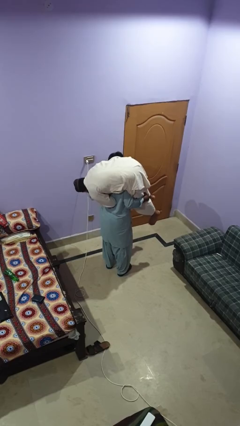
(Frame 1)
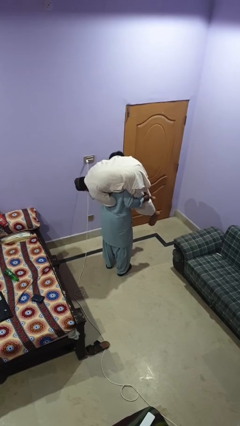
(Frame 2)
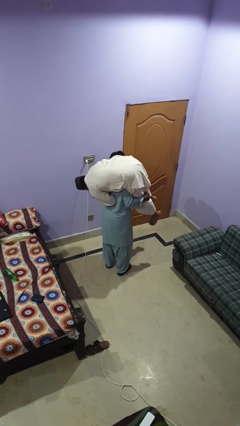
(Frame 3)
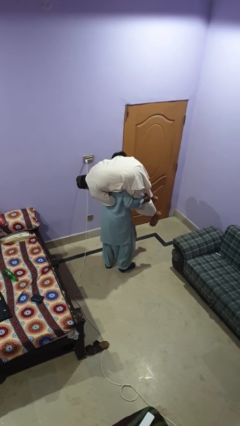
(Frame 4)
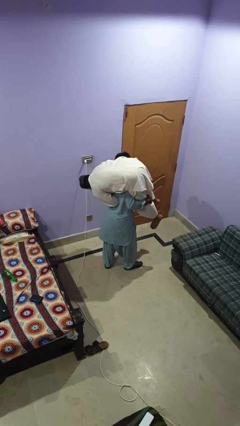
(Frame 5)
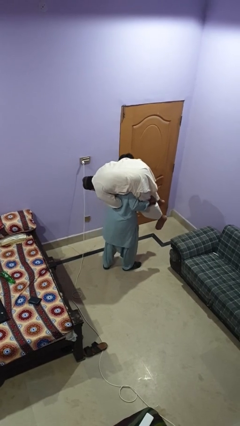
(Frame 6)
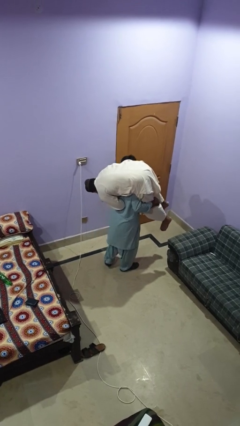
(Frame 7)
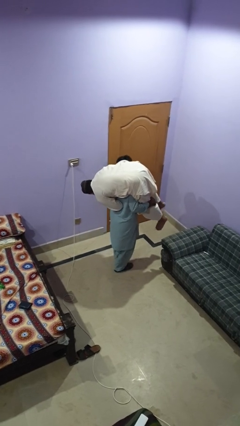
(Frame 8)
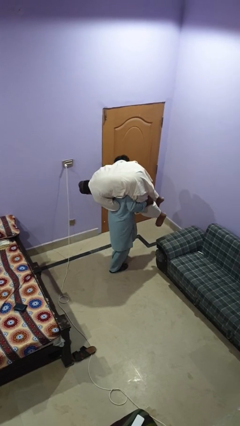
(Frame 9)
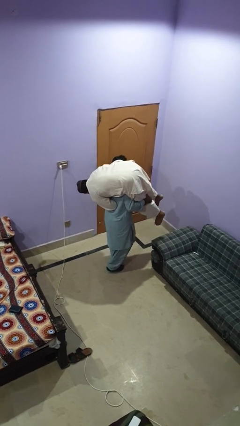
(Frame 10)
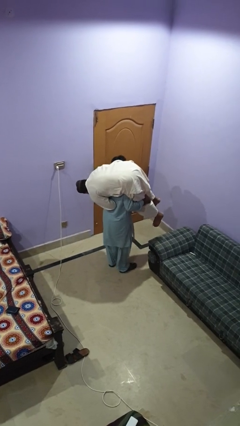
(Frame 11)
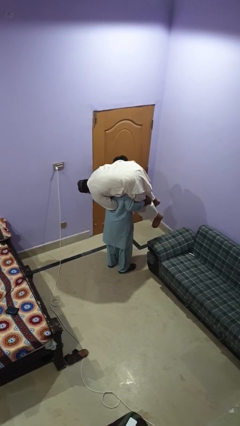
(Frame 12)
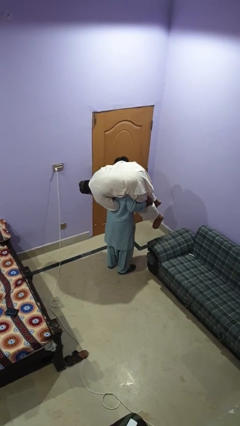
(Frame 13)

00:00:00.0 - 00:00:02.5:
person carries person on shoulders

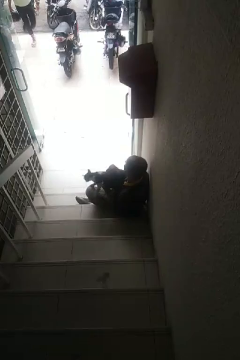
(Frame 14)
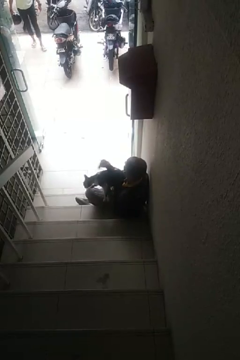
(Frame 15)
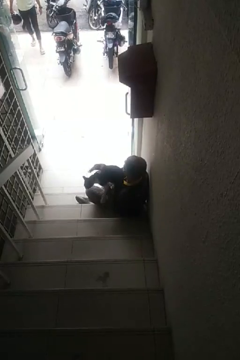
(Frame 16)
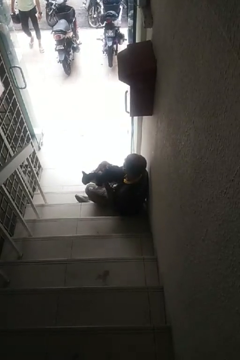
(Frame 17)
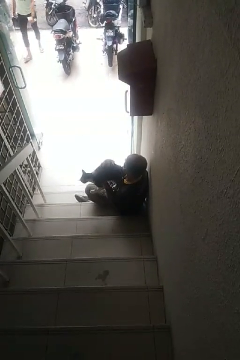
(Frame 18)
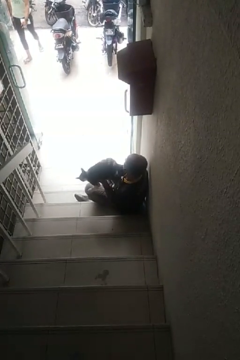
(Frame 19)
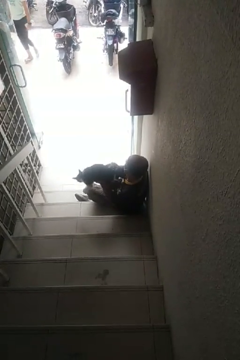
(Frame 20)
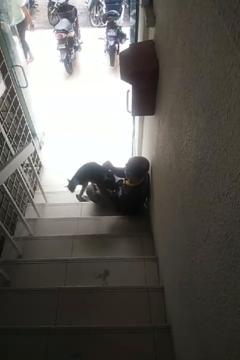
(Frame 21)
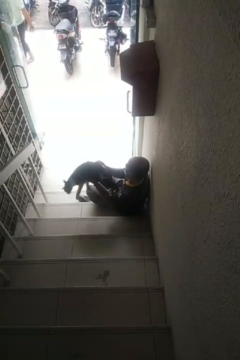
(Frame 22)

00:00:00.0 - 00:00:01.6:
person pets cat

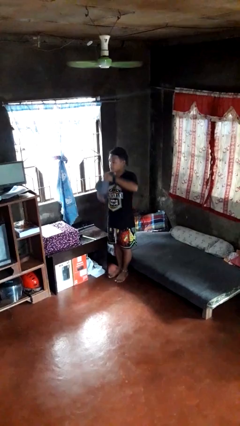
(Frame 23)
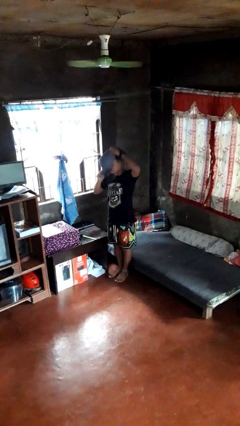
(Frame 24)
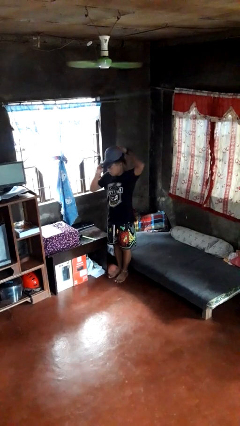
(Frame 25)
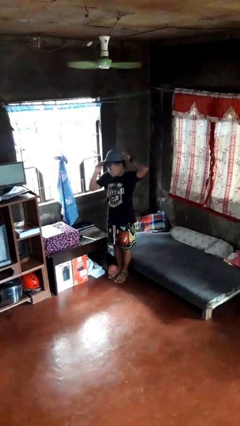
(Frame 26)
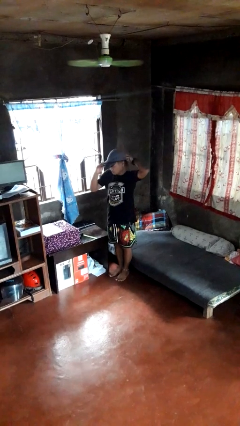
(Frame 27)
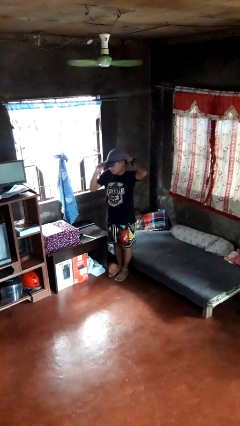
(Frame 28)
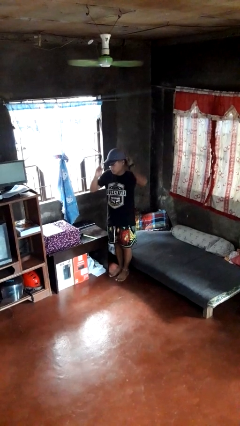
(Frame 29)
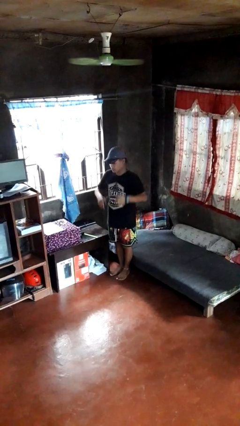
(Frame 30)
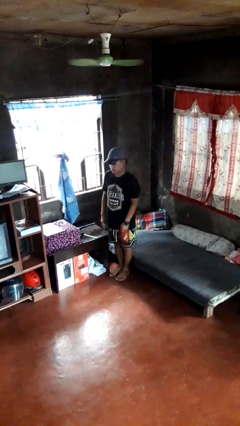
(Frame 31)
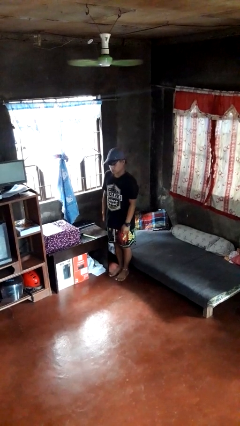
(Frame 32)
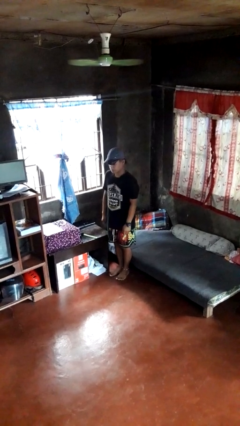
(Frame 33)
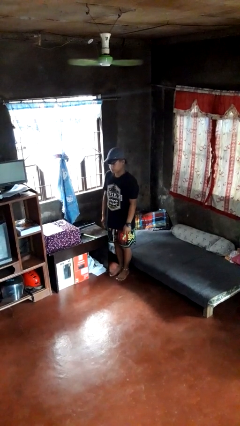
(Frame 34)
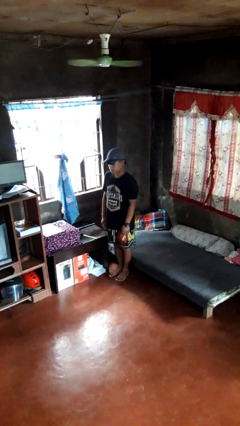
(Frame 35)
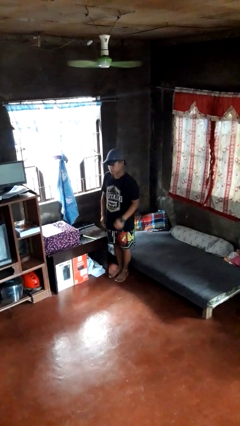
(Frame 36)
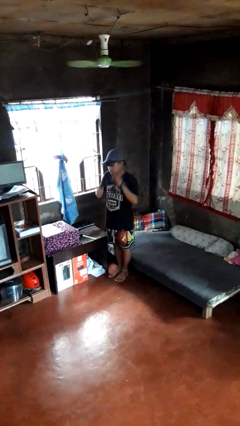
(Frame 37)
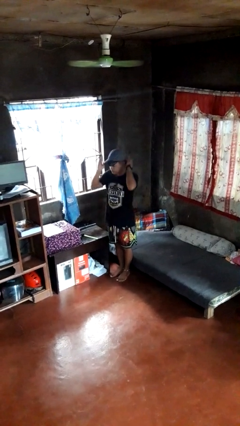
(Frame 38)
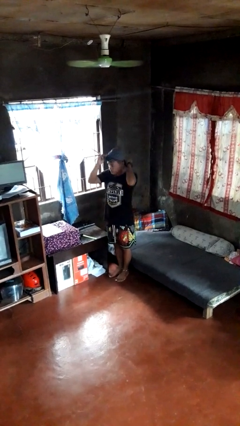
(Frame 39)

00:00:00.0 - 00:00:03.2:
person puts on hat

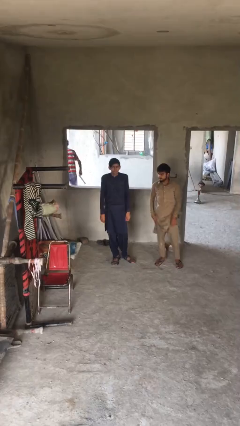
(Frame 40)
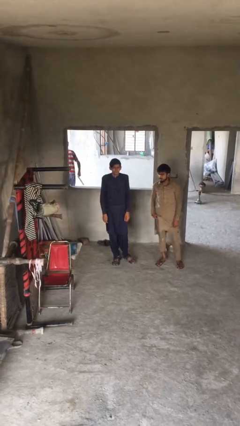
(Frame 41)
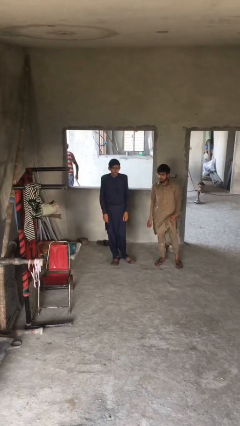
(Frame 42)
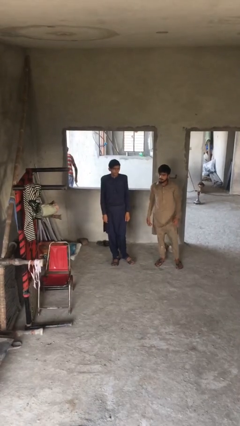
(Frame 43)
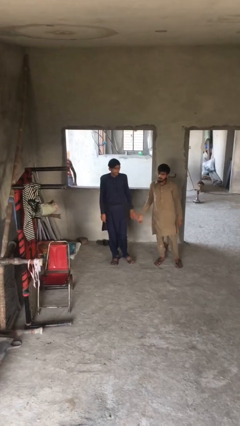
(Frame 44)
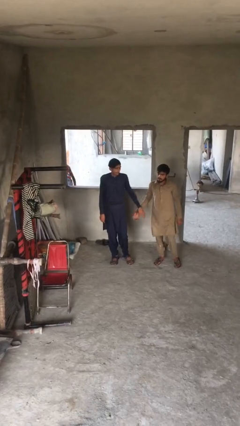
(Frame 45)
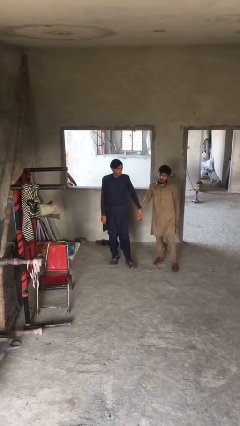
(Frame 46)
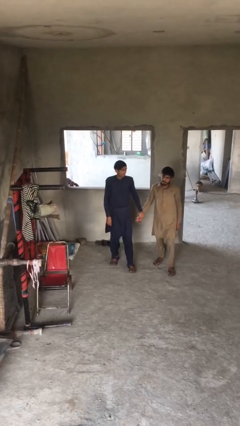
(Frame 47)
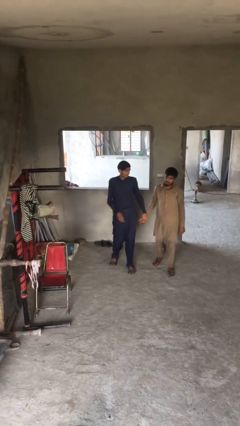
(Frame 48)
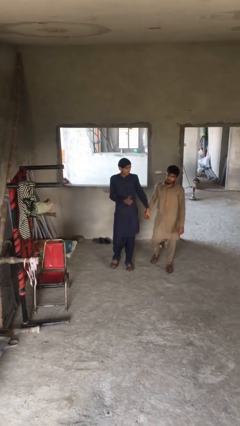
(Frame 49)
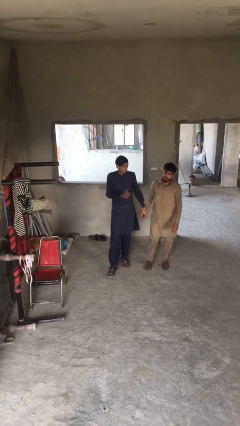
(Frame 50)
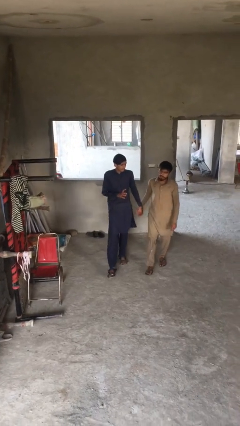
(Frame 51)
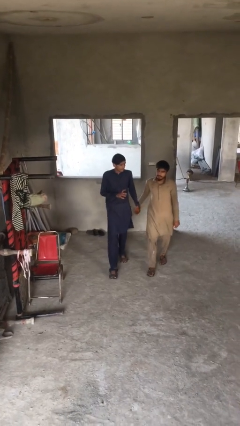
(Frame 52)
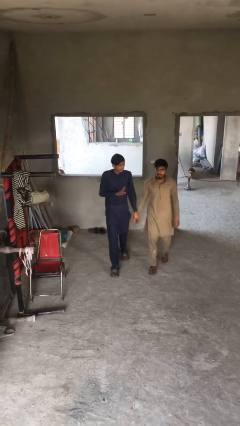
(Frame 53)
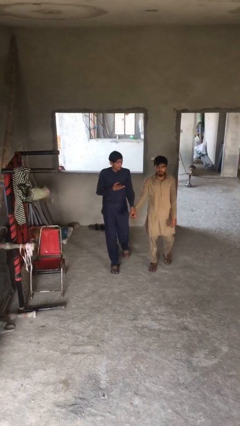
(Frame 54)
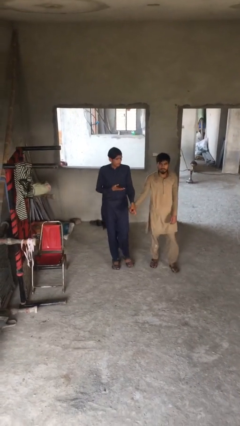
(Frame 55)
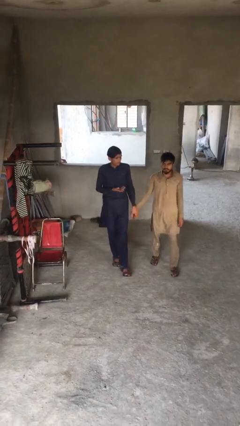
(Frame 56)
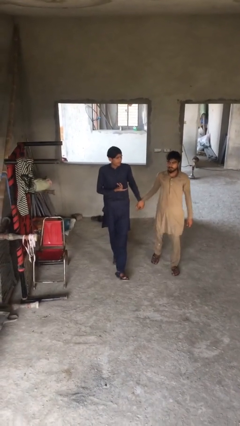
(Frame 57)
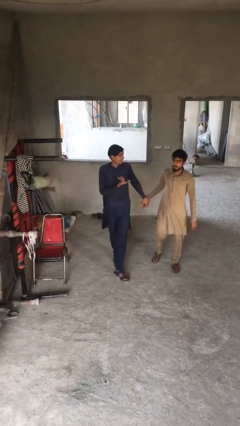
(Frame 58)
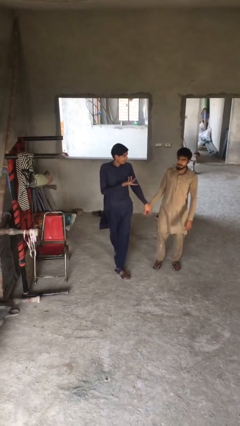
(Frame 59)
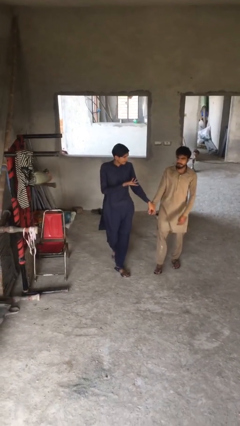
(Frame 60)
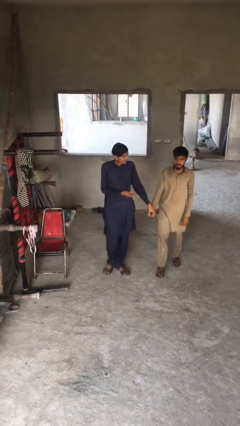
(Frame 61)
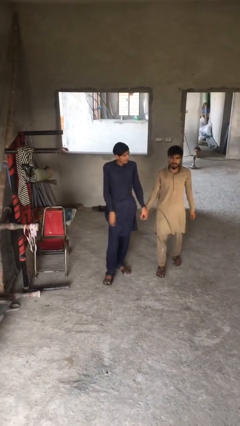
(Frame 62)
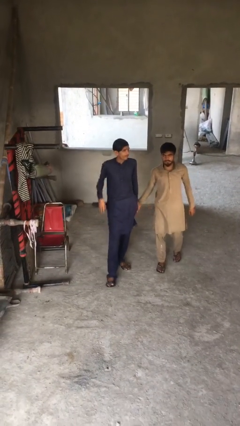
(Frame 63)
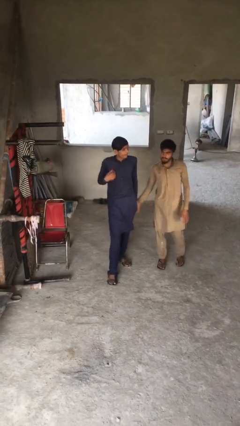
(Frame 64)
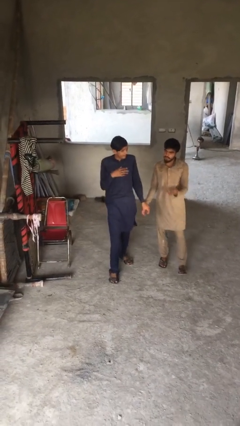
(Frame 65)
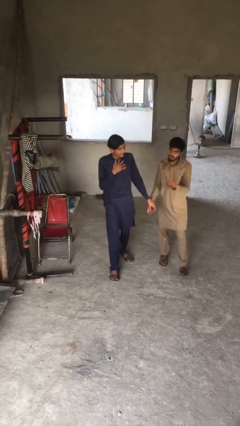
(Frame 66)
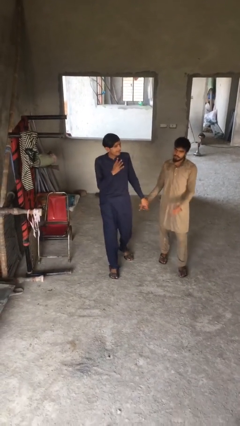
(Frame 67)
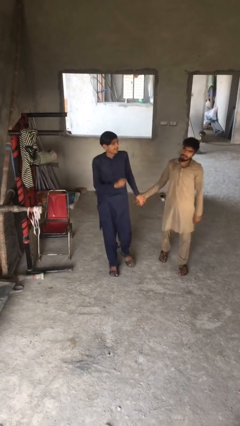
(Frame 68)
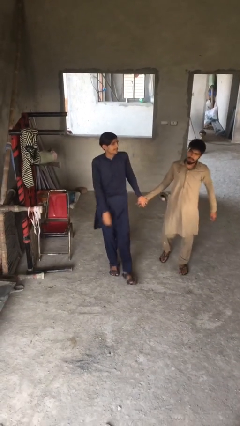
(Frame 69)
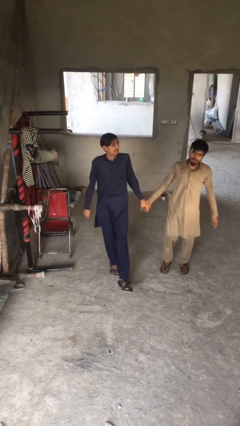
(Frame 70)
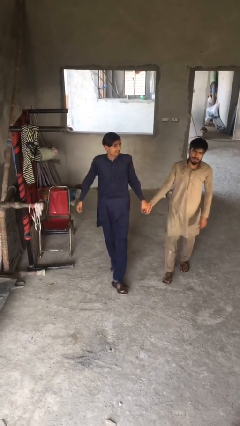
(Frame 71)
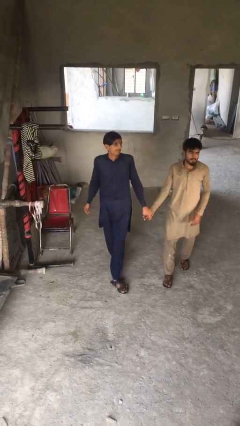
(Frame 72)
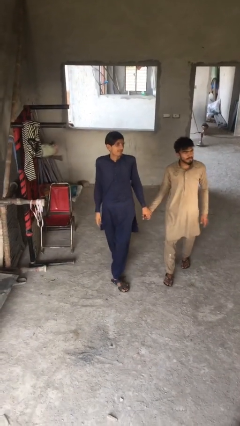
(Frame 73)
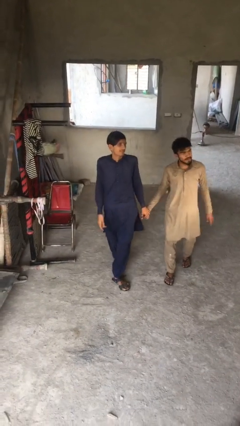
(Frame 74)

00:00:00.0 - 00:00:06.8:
person holds hand

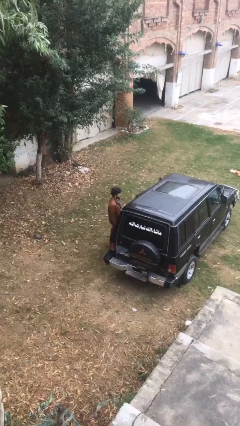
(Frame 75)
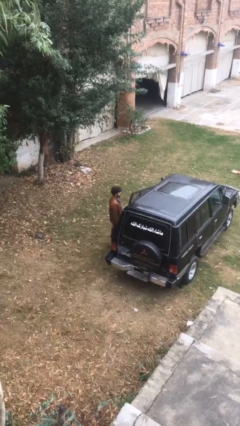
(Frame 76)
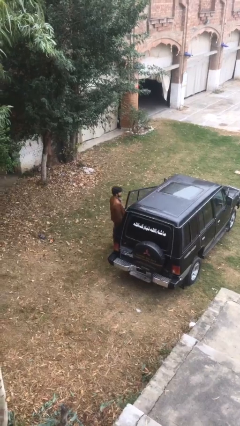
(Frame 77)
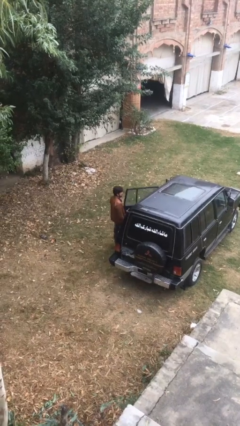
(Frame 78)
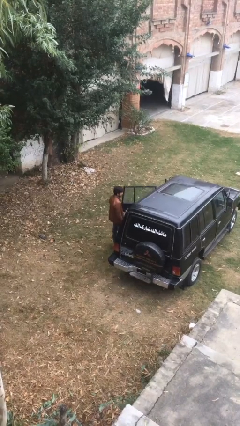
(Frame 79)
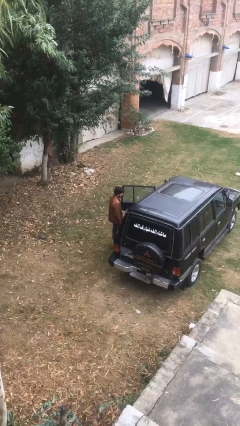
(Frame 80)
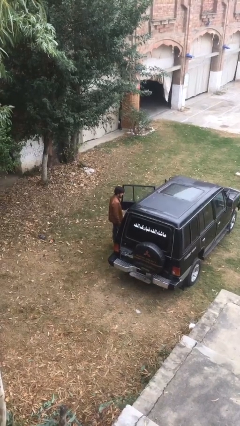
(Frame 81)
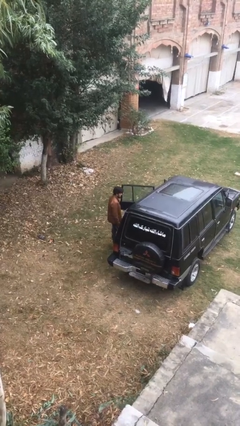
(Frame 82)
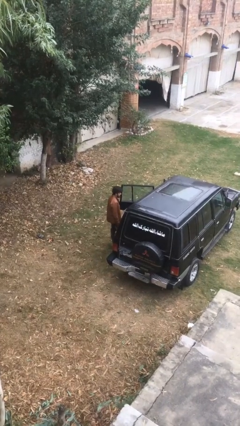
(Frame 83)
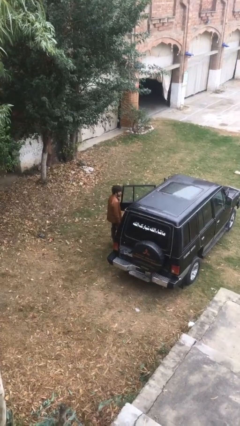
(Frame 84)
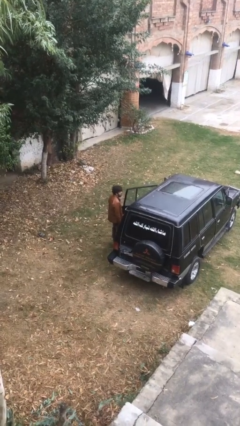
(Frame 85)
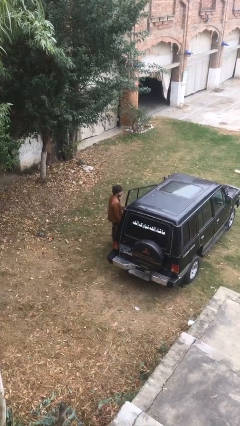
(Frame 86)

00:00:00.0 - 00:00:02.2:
person opens car door

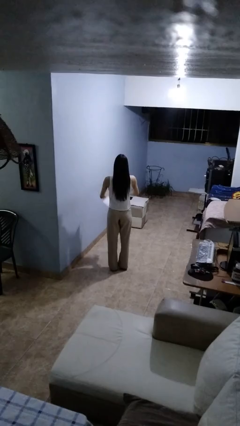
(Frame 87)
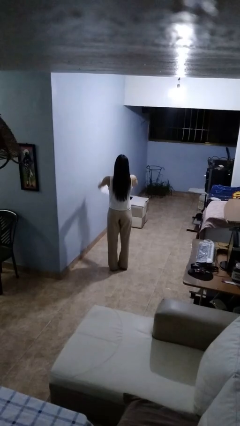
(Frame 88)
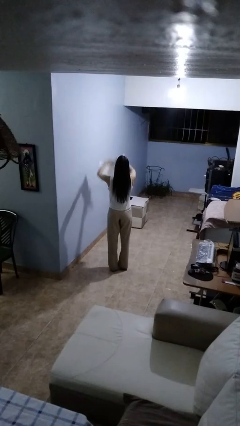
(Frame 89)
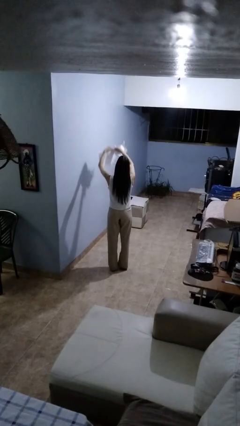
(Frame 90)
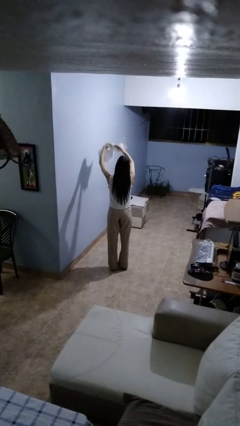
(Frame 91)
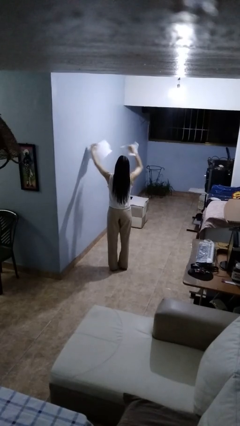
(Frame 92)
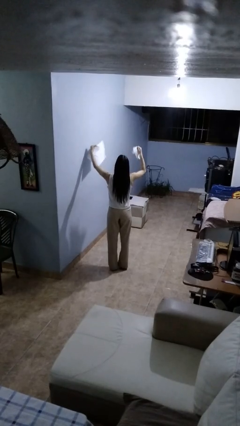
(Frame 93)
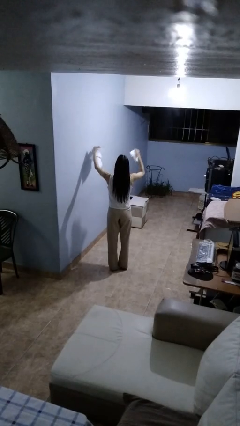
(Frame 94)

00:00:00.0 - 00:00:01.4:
person tears paper
